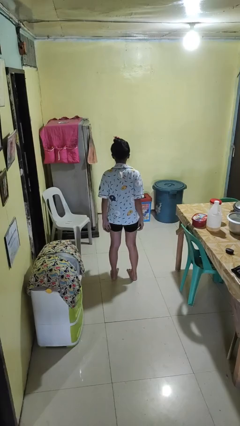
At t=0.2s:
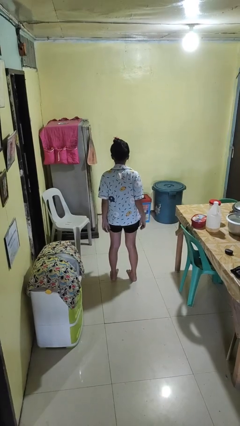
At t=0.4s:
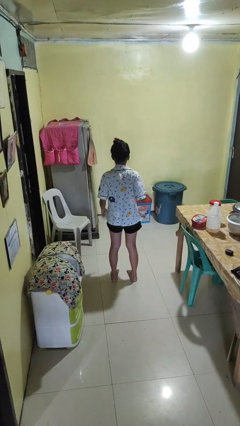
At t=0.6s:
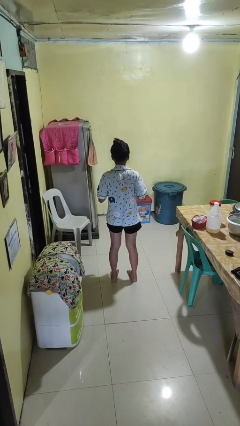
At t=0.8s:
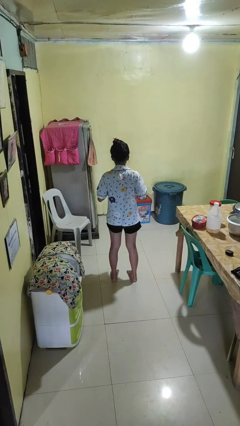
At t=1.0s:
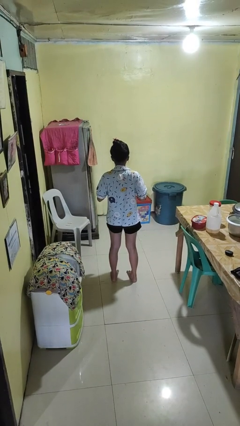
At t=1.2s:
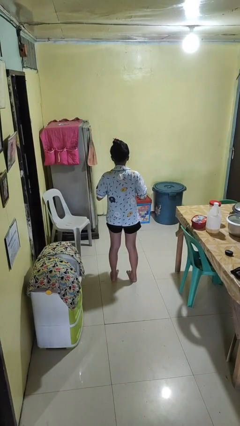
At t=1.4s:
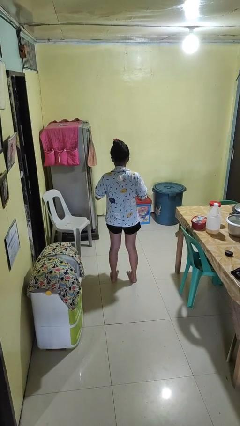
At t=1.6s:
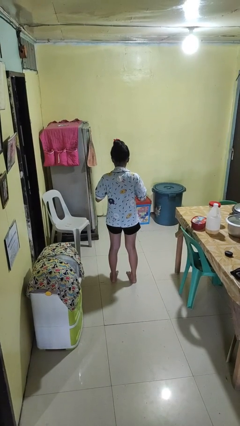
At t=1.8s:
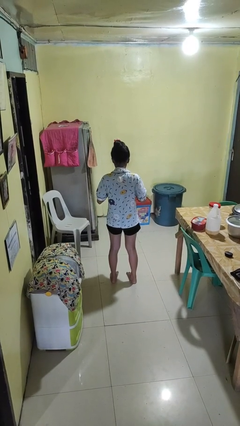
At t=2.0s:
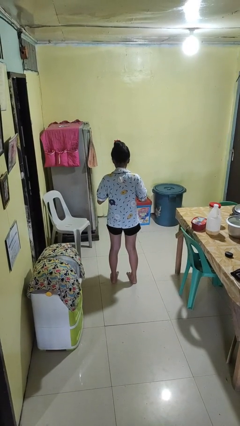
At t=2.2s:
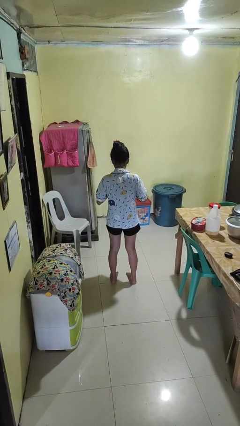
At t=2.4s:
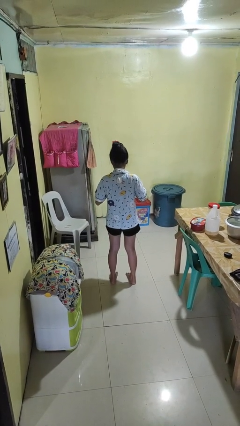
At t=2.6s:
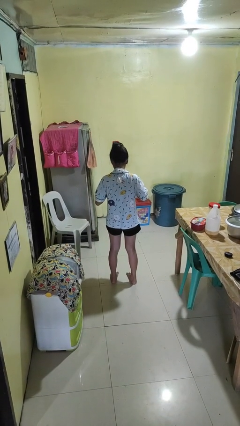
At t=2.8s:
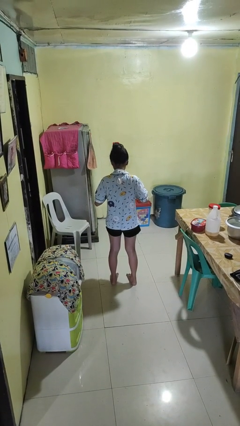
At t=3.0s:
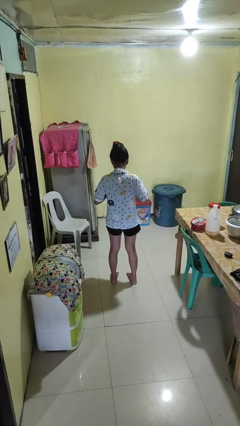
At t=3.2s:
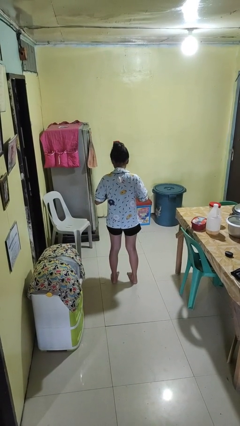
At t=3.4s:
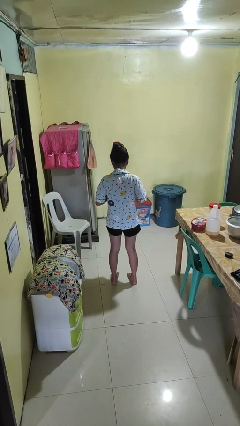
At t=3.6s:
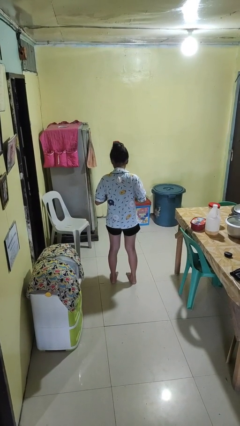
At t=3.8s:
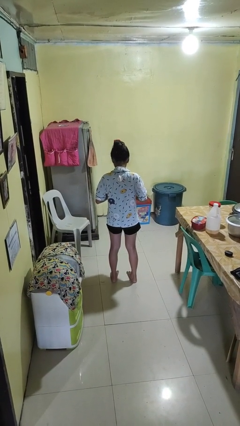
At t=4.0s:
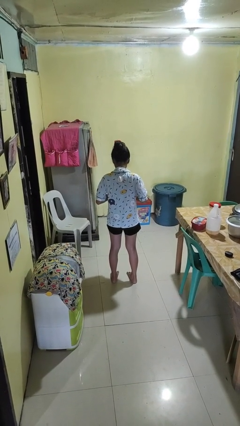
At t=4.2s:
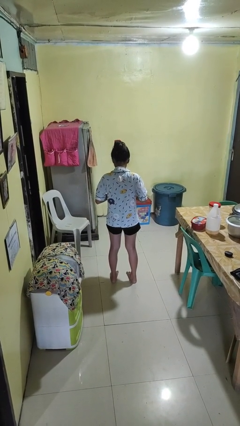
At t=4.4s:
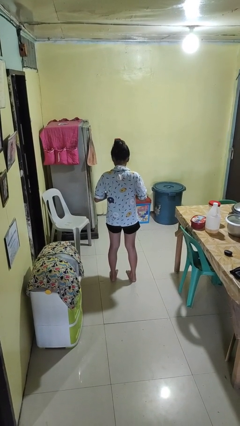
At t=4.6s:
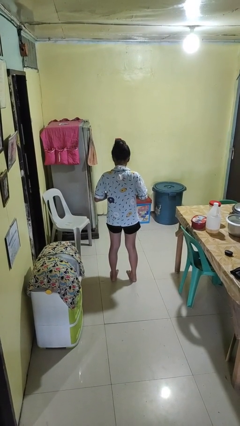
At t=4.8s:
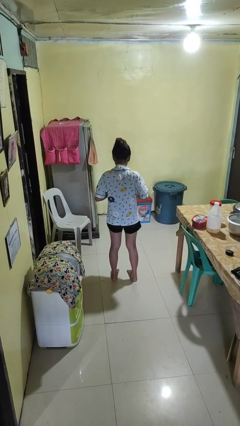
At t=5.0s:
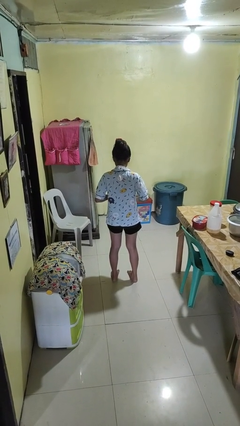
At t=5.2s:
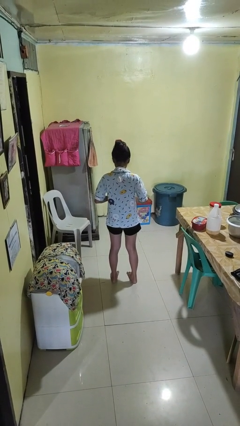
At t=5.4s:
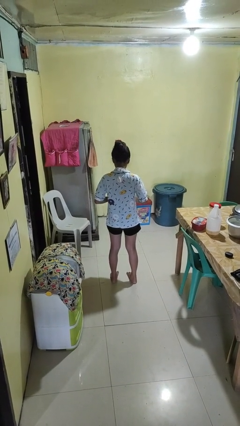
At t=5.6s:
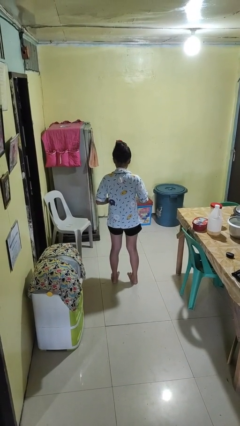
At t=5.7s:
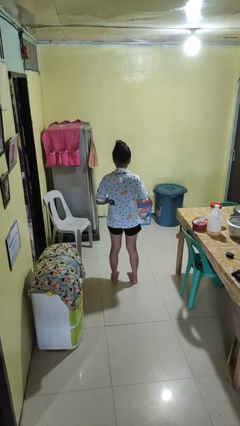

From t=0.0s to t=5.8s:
person buttons shirt

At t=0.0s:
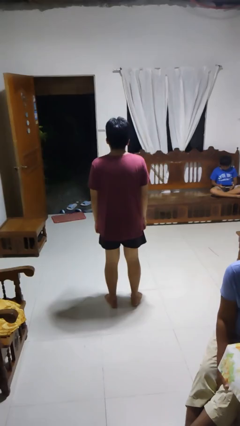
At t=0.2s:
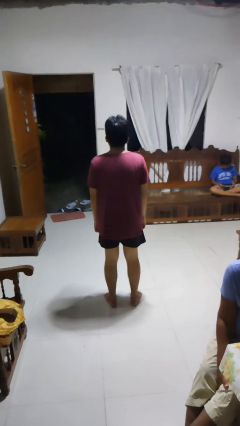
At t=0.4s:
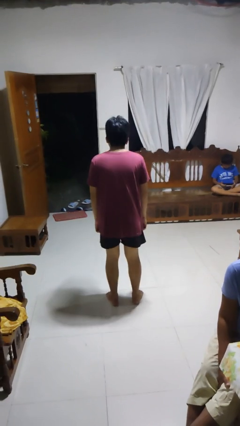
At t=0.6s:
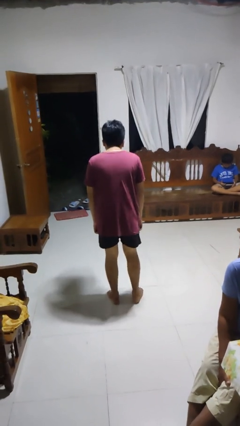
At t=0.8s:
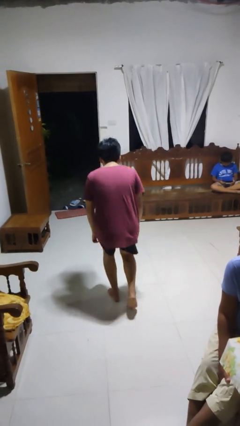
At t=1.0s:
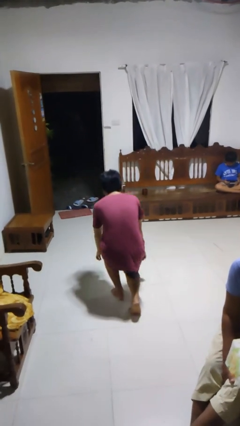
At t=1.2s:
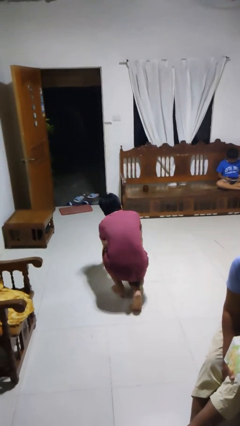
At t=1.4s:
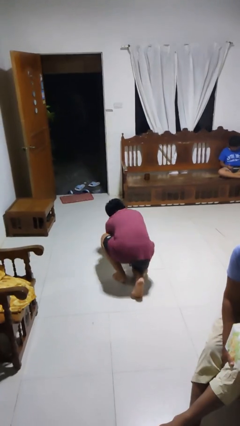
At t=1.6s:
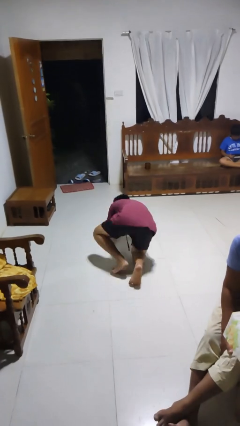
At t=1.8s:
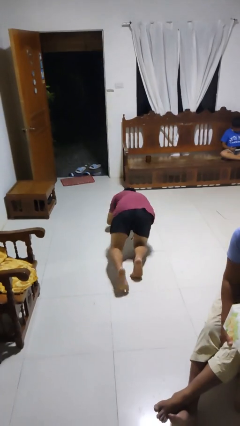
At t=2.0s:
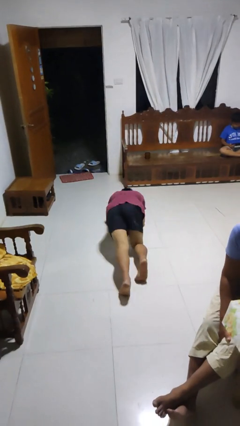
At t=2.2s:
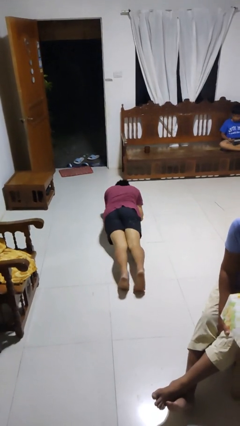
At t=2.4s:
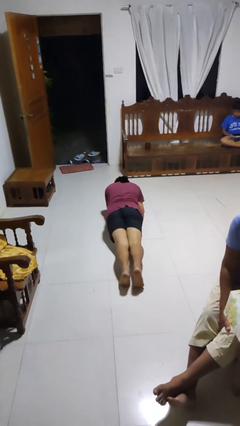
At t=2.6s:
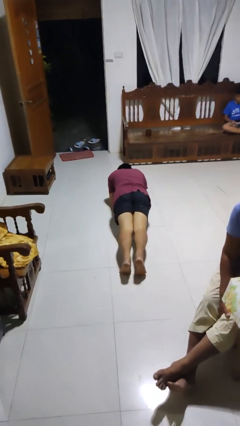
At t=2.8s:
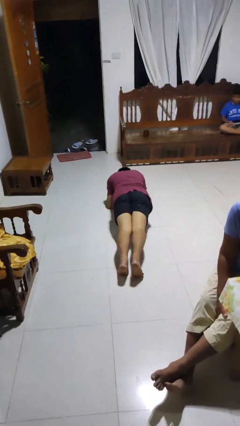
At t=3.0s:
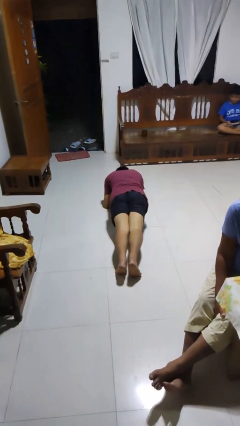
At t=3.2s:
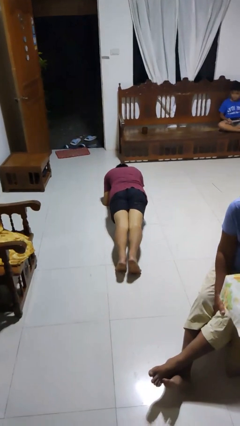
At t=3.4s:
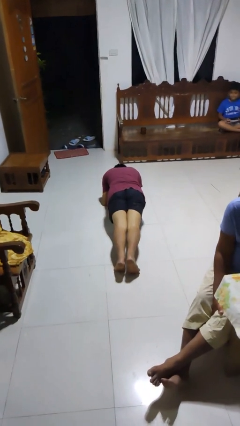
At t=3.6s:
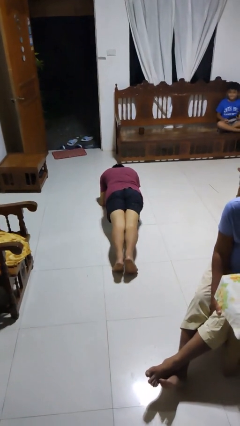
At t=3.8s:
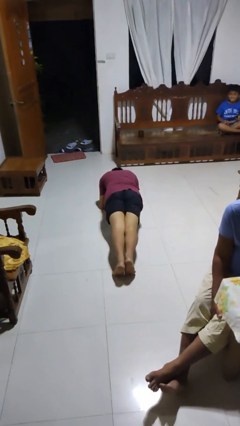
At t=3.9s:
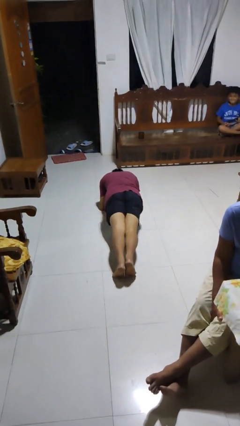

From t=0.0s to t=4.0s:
person exercises with plank

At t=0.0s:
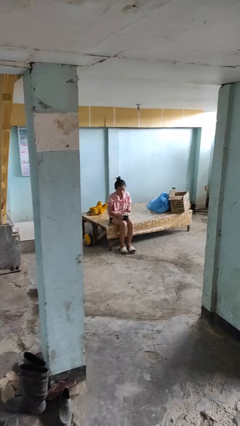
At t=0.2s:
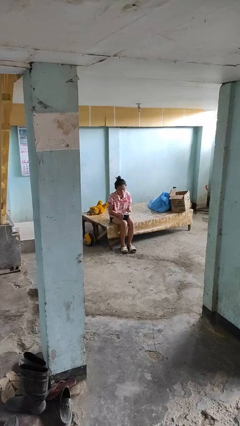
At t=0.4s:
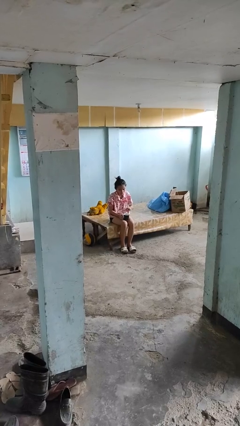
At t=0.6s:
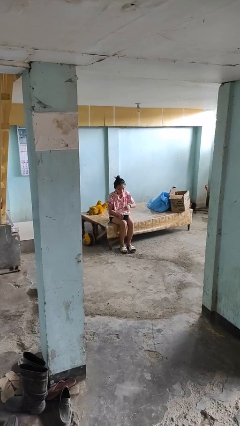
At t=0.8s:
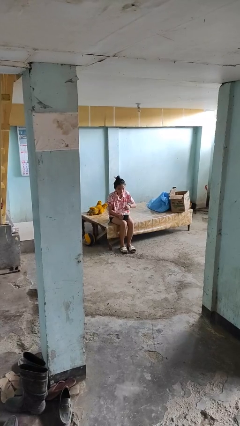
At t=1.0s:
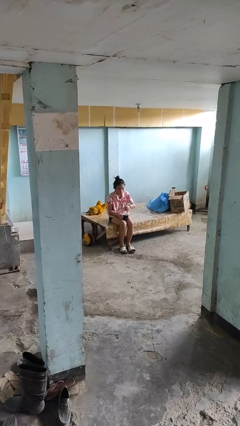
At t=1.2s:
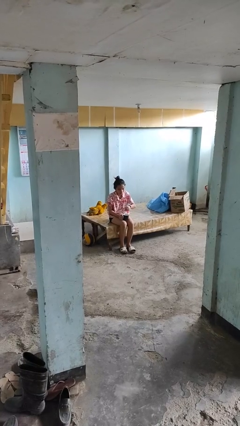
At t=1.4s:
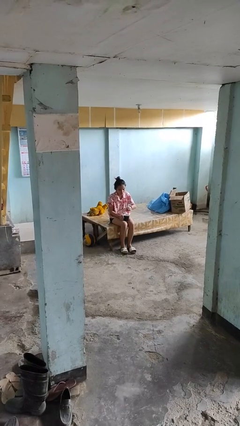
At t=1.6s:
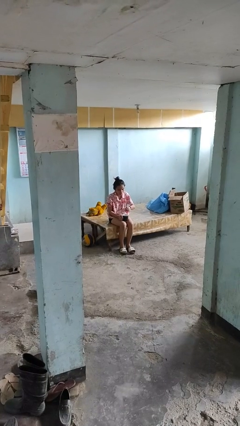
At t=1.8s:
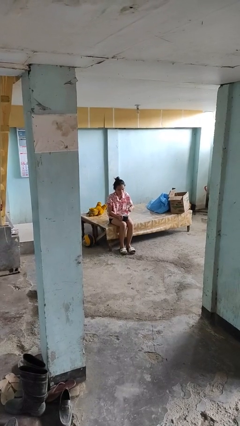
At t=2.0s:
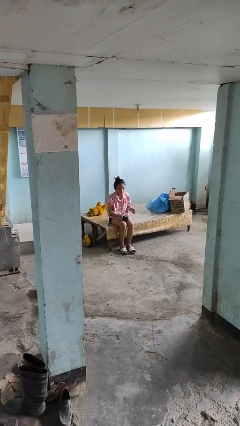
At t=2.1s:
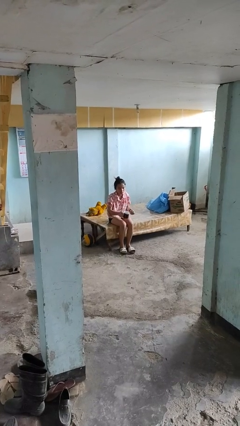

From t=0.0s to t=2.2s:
person stirs mug

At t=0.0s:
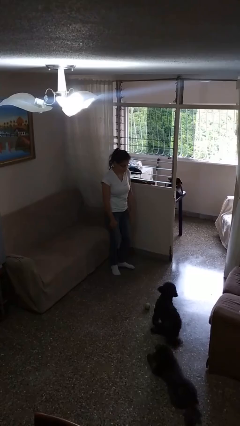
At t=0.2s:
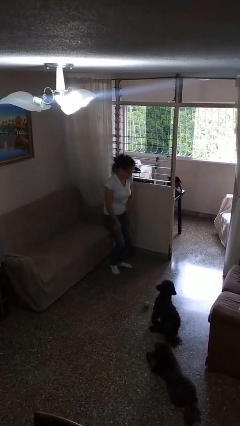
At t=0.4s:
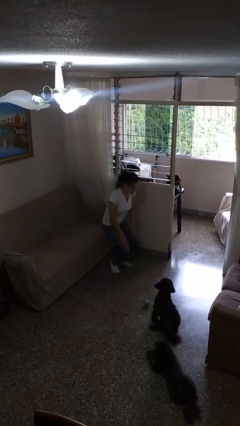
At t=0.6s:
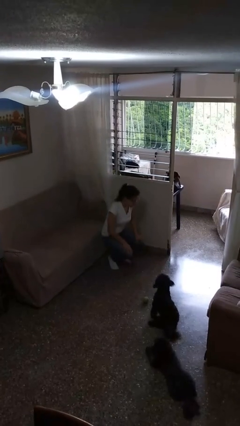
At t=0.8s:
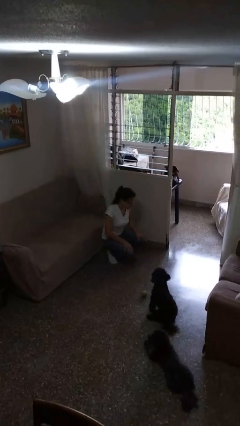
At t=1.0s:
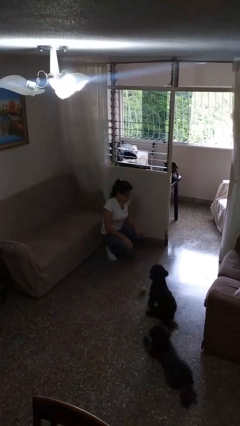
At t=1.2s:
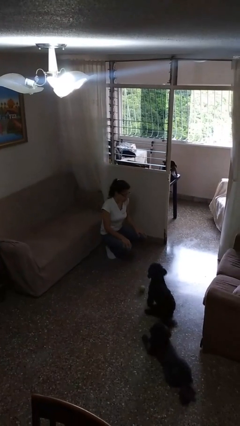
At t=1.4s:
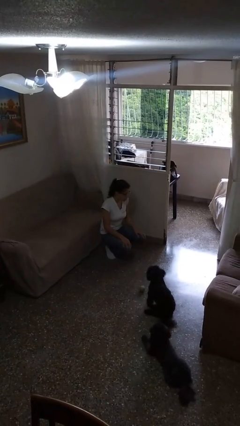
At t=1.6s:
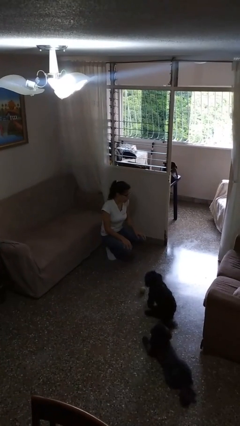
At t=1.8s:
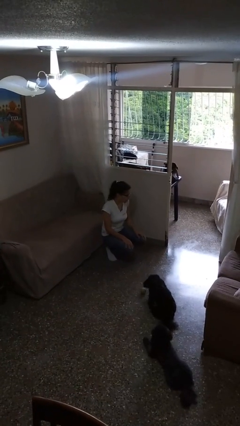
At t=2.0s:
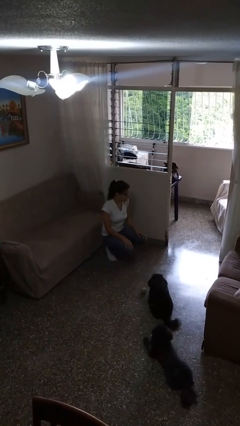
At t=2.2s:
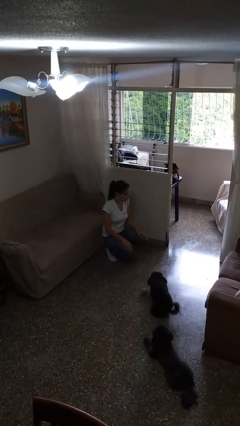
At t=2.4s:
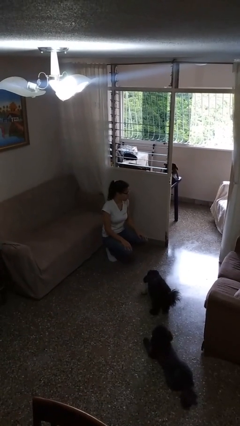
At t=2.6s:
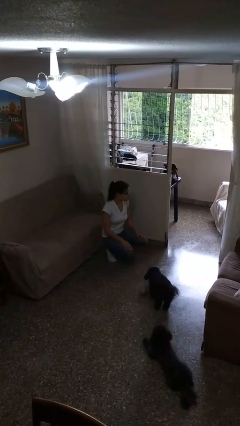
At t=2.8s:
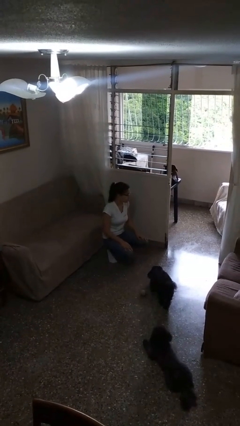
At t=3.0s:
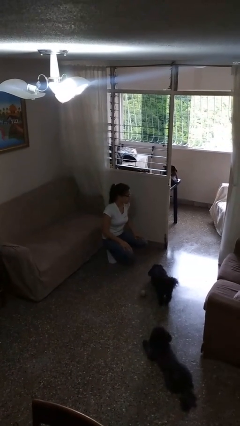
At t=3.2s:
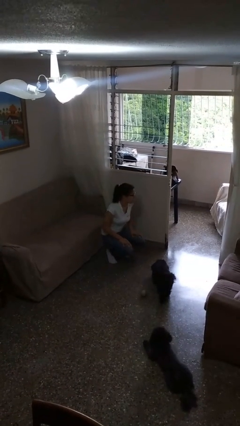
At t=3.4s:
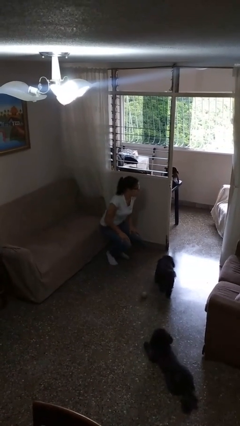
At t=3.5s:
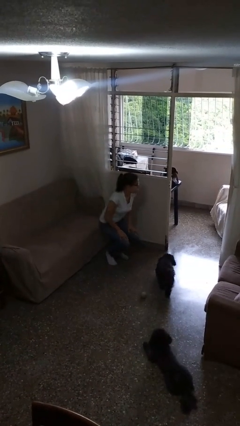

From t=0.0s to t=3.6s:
person squats

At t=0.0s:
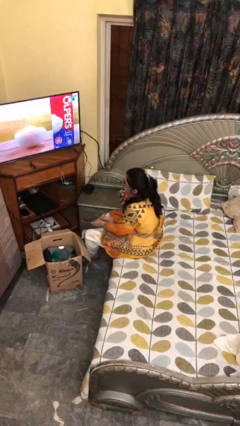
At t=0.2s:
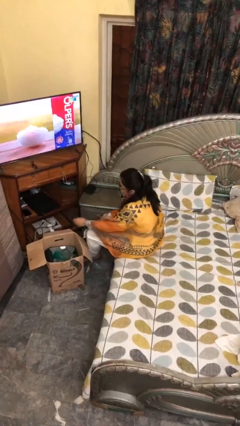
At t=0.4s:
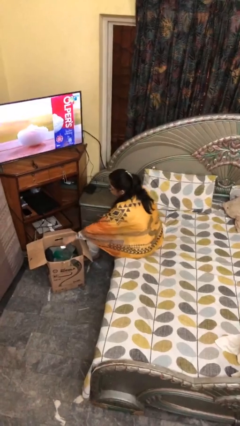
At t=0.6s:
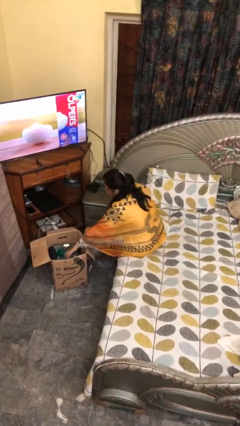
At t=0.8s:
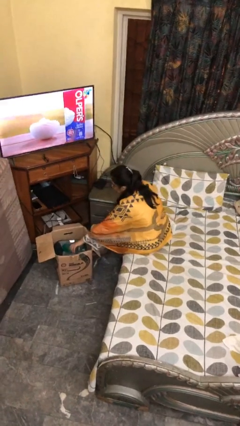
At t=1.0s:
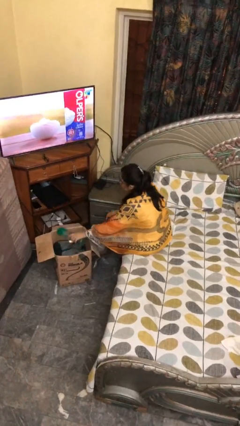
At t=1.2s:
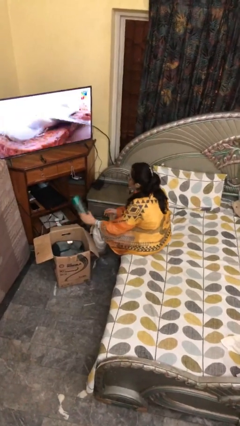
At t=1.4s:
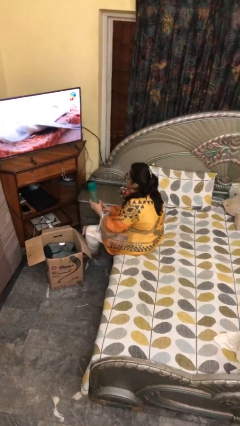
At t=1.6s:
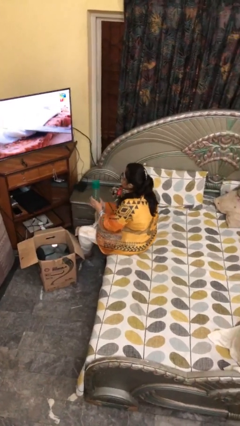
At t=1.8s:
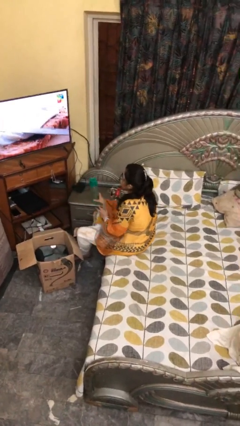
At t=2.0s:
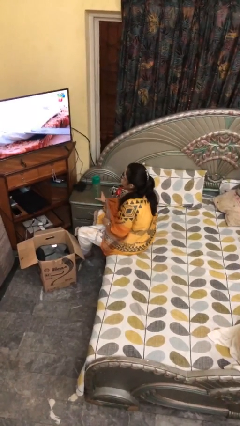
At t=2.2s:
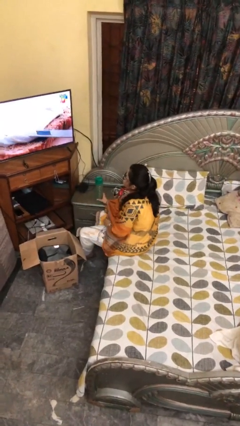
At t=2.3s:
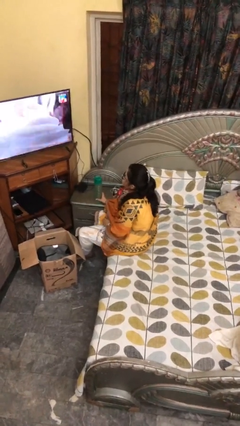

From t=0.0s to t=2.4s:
person takes object from box
